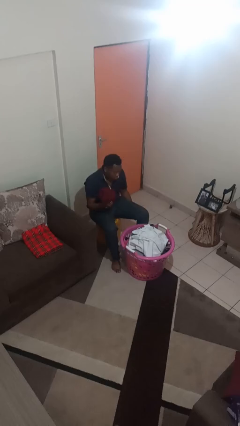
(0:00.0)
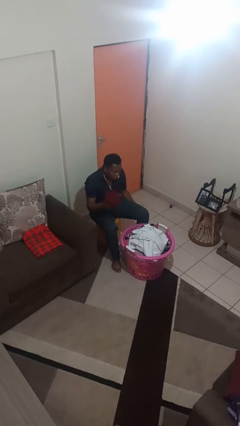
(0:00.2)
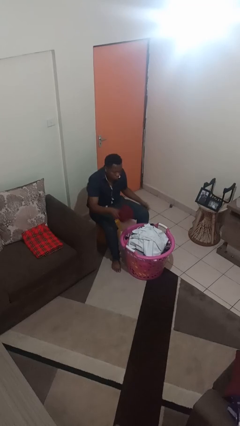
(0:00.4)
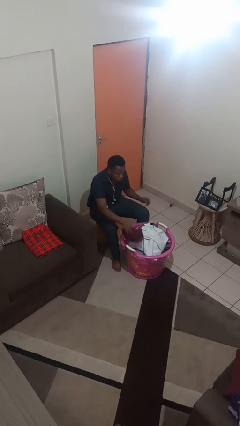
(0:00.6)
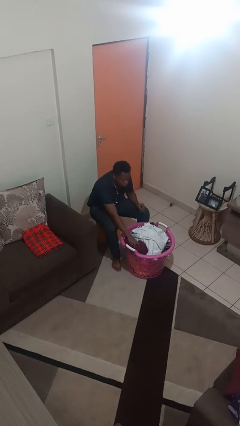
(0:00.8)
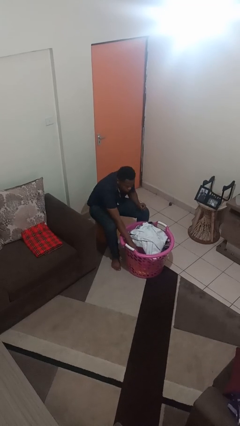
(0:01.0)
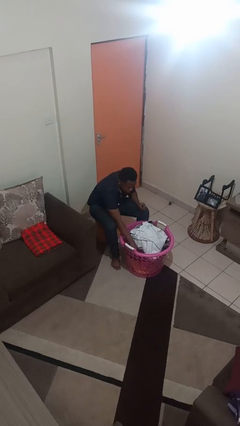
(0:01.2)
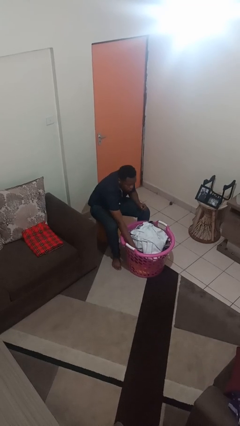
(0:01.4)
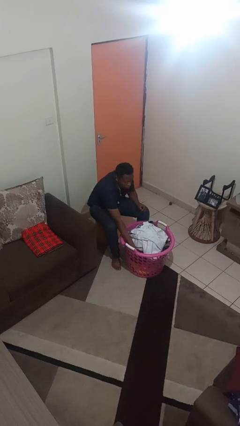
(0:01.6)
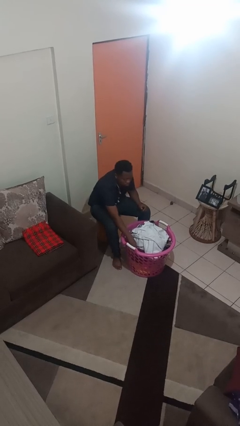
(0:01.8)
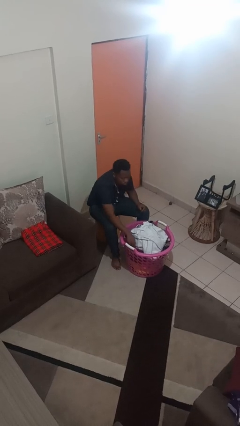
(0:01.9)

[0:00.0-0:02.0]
person puts object into basket

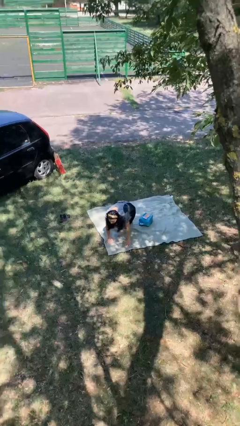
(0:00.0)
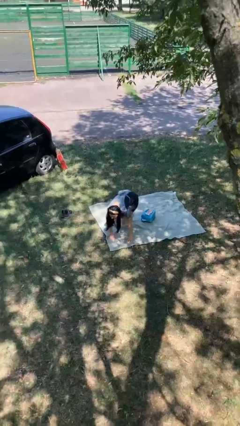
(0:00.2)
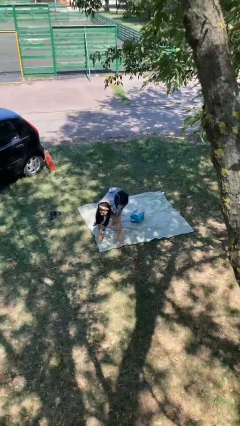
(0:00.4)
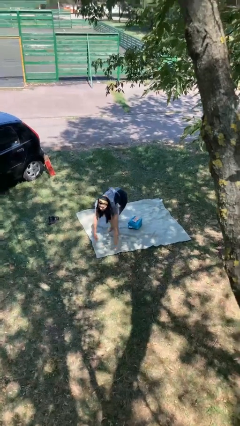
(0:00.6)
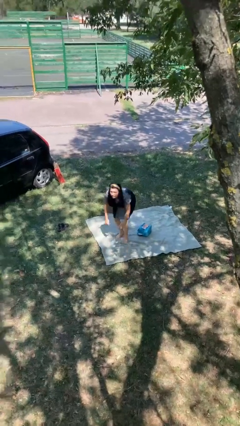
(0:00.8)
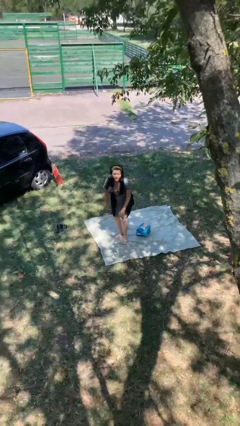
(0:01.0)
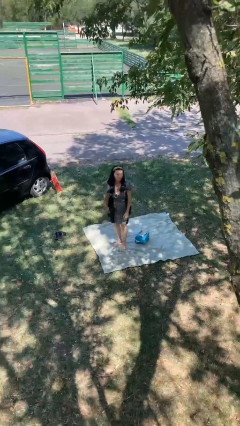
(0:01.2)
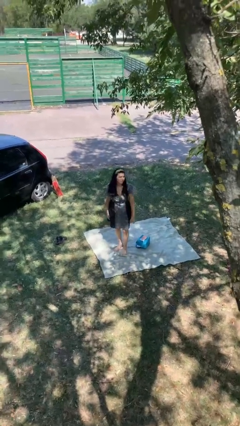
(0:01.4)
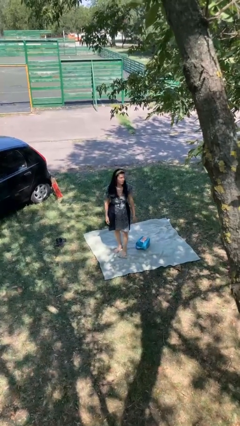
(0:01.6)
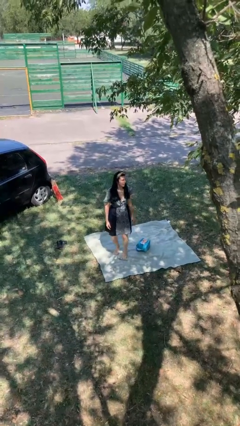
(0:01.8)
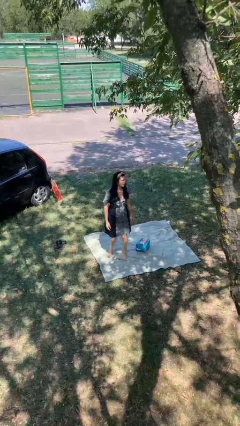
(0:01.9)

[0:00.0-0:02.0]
person stands up from floor

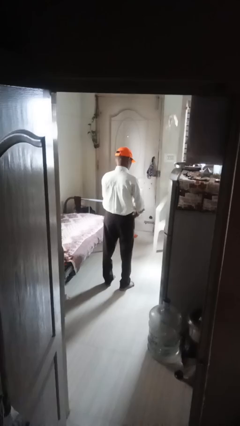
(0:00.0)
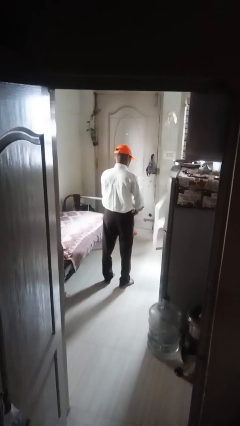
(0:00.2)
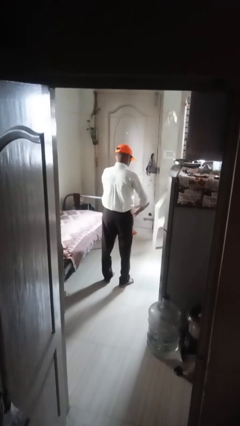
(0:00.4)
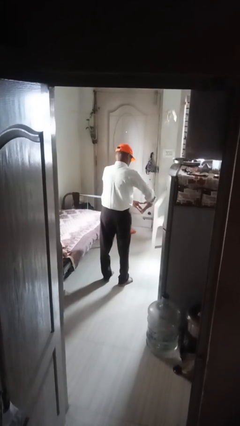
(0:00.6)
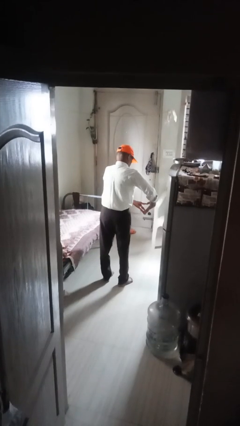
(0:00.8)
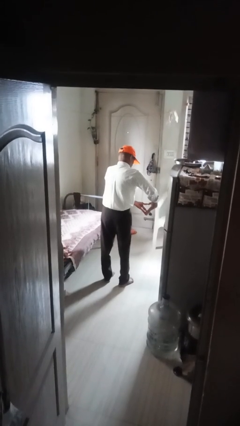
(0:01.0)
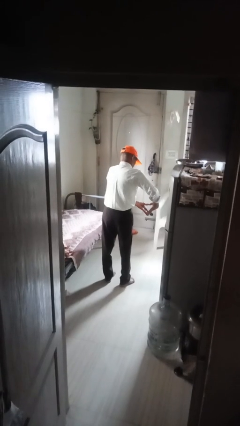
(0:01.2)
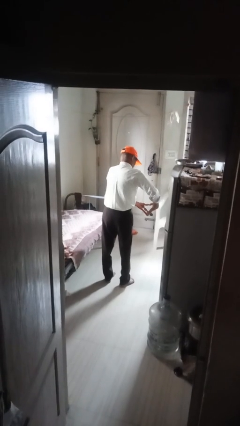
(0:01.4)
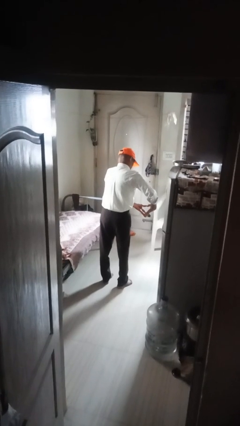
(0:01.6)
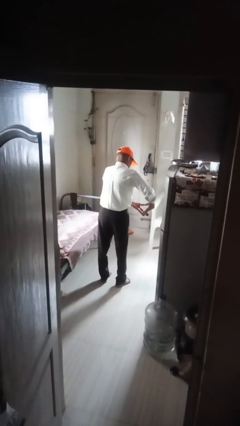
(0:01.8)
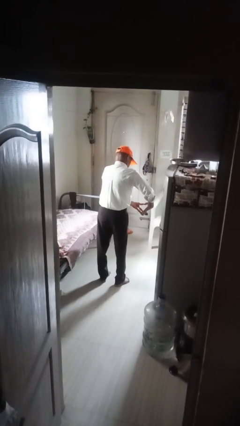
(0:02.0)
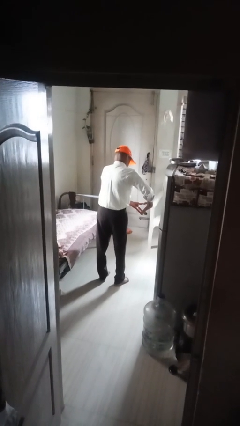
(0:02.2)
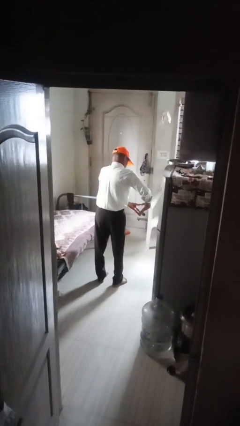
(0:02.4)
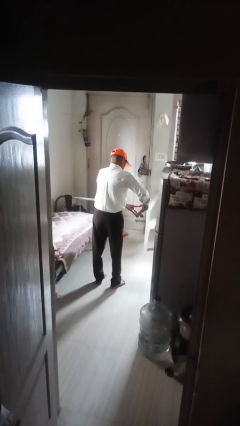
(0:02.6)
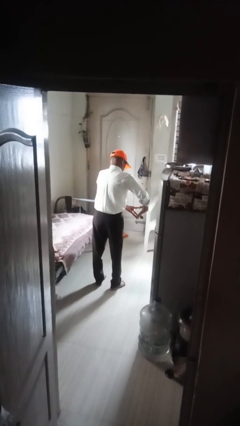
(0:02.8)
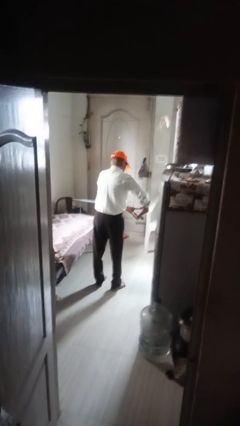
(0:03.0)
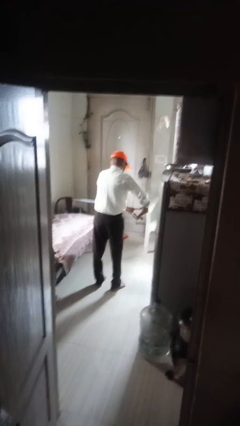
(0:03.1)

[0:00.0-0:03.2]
person gestures heart

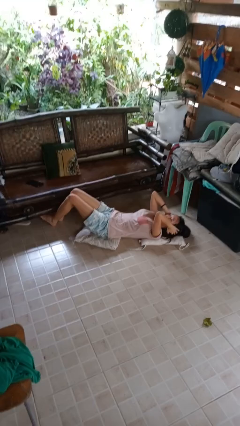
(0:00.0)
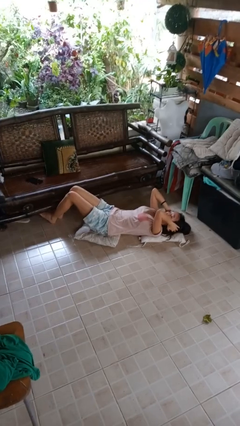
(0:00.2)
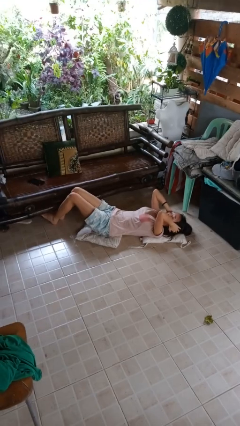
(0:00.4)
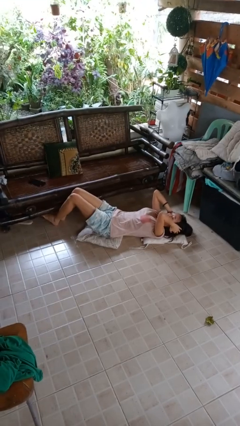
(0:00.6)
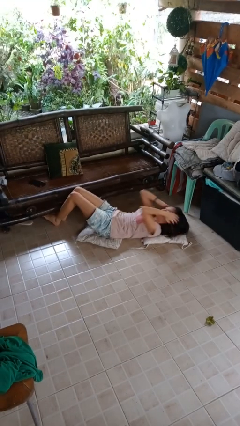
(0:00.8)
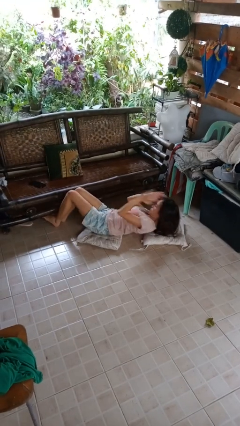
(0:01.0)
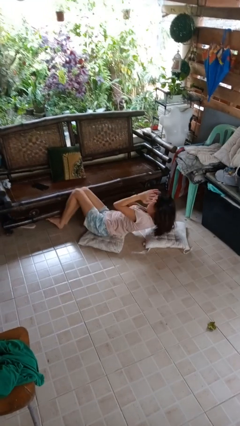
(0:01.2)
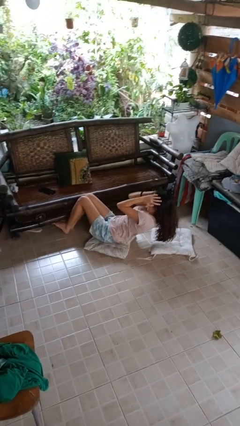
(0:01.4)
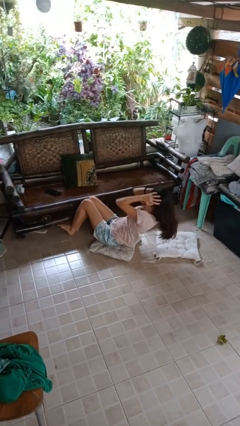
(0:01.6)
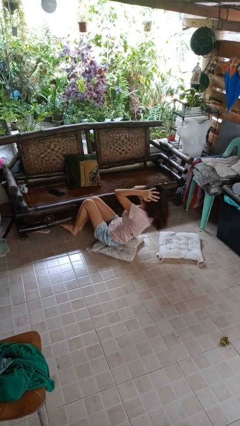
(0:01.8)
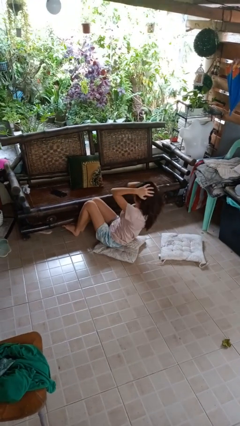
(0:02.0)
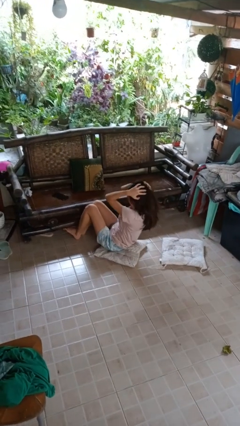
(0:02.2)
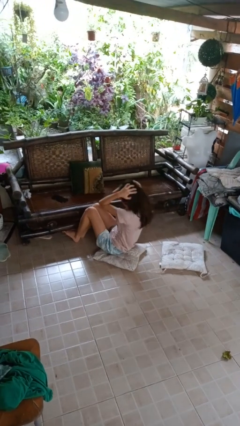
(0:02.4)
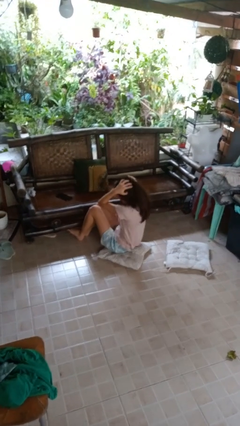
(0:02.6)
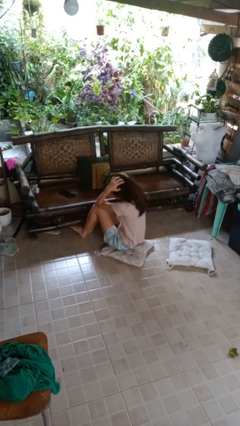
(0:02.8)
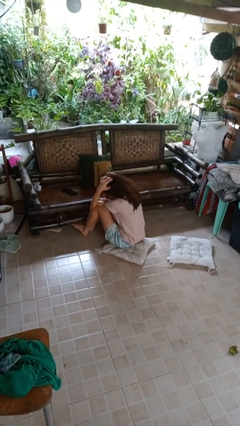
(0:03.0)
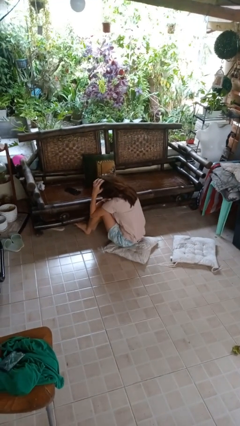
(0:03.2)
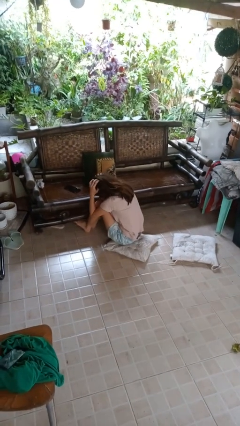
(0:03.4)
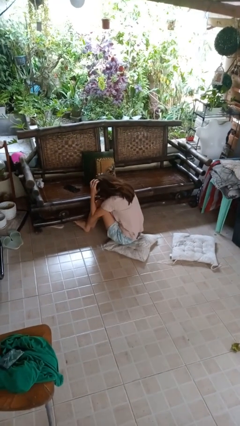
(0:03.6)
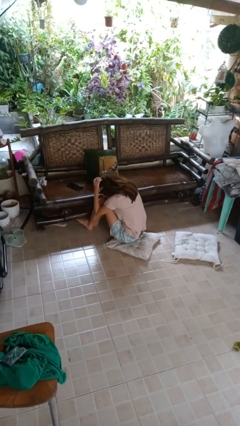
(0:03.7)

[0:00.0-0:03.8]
person exercises with situp

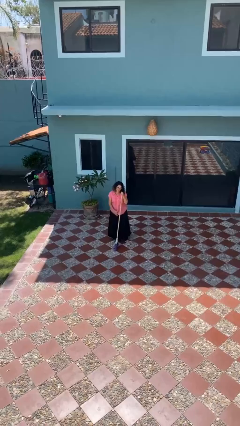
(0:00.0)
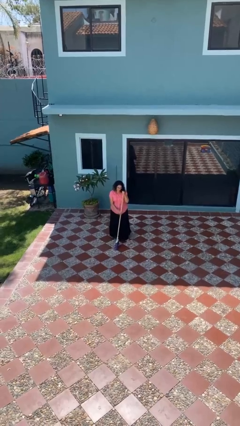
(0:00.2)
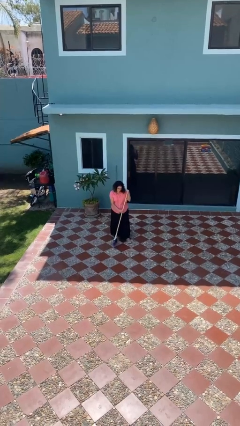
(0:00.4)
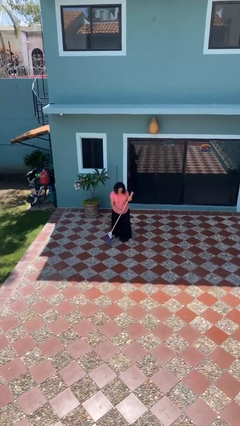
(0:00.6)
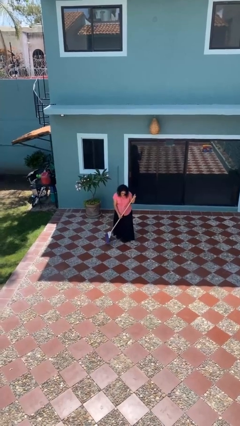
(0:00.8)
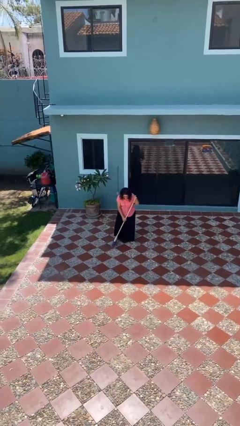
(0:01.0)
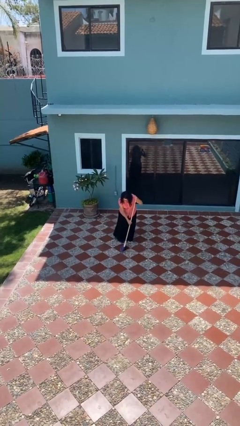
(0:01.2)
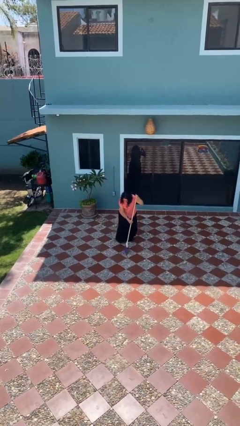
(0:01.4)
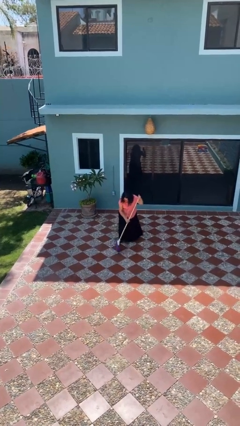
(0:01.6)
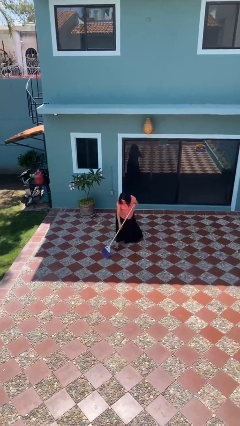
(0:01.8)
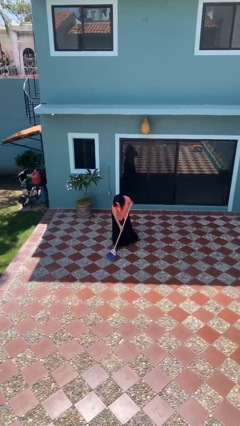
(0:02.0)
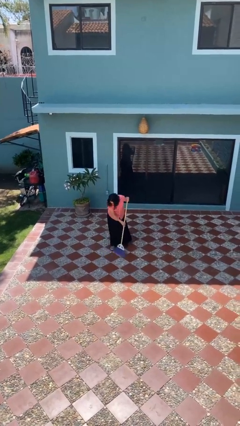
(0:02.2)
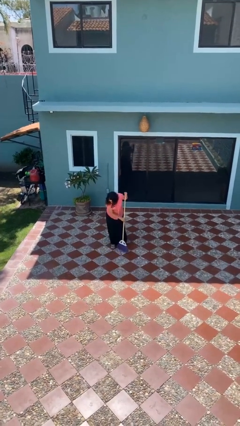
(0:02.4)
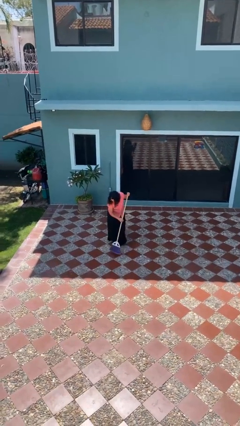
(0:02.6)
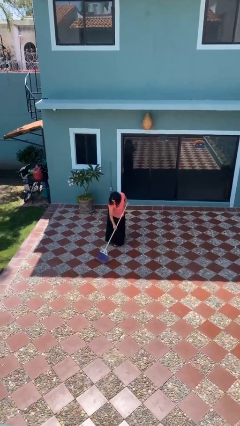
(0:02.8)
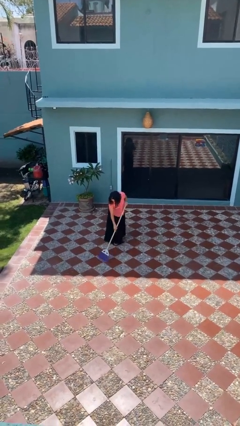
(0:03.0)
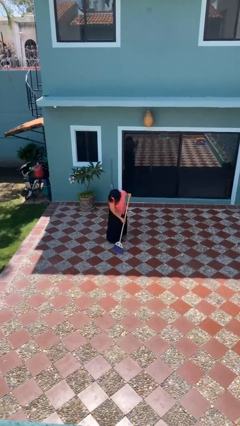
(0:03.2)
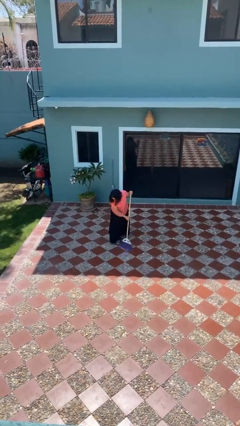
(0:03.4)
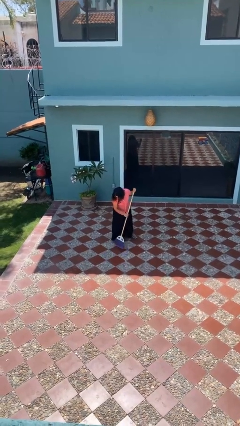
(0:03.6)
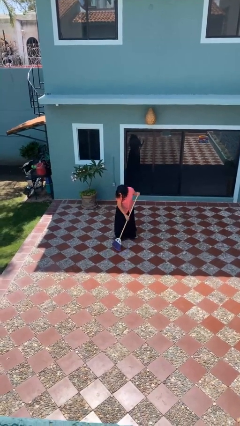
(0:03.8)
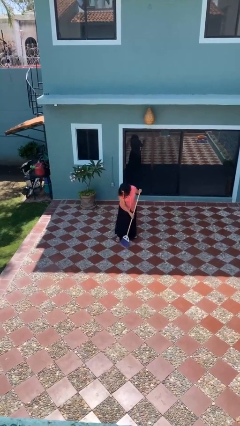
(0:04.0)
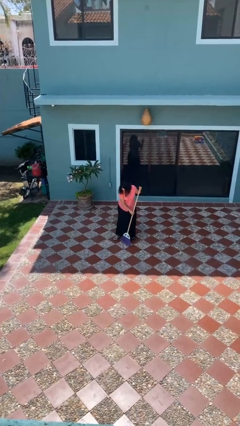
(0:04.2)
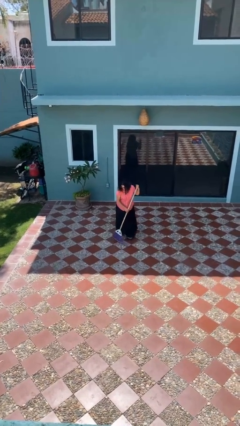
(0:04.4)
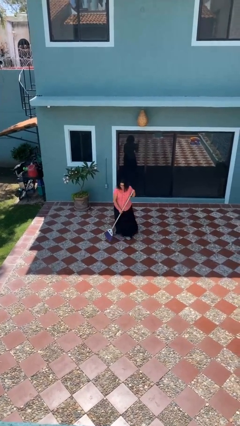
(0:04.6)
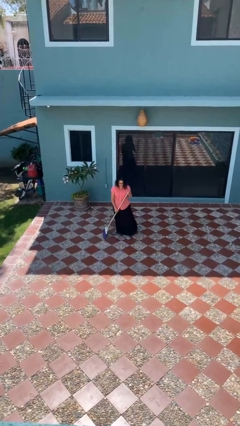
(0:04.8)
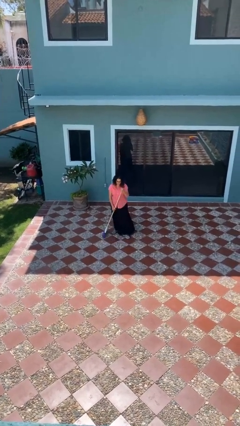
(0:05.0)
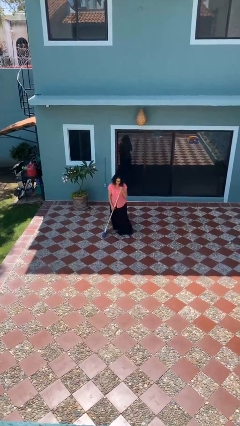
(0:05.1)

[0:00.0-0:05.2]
person sweeps floor

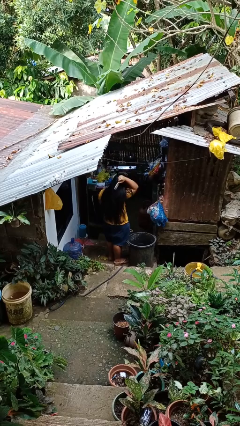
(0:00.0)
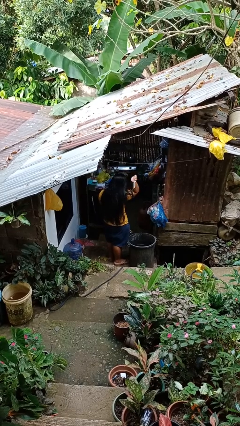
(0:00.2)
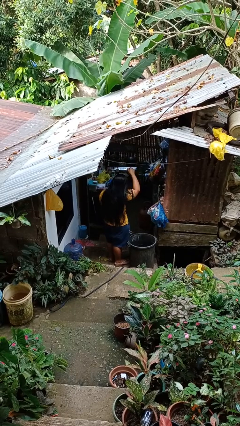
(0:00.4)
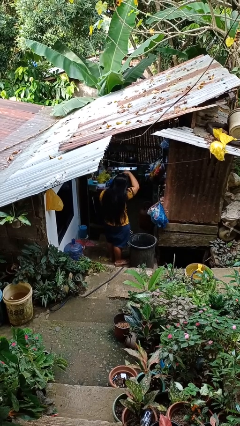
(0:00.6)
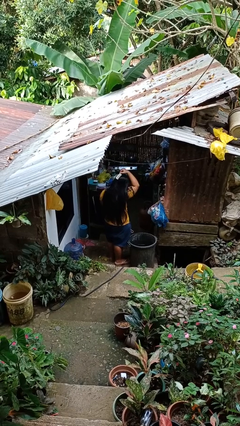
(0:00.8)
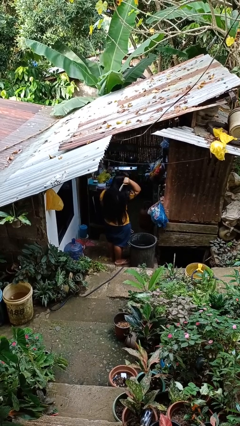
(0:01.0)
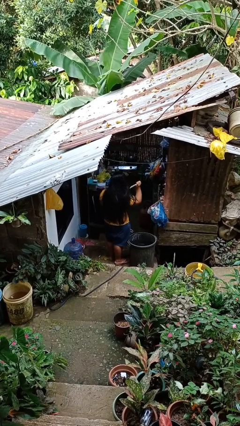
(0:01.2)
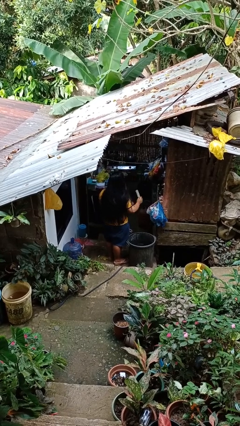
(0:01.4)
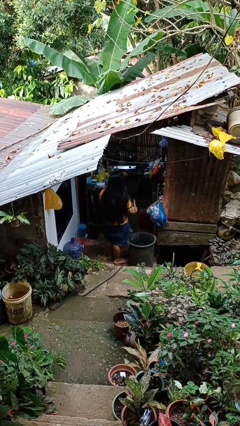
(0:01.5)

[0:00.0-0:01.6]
person brushes hair
